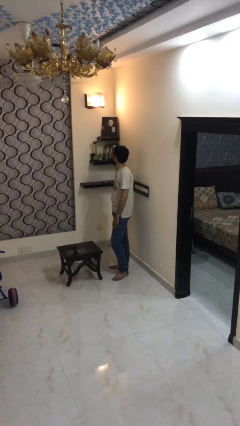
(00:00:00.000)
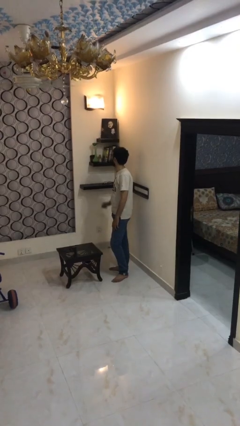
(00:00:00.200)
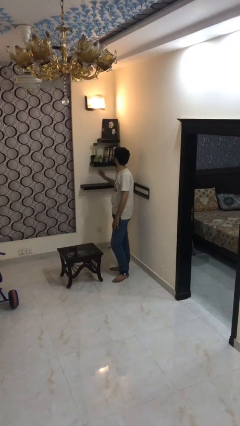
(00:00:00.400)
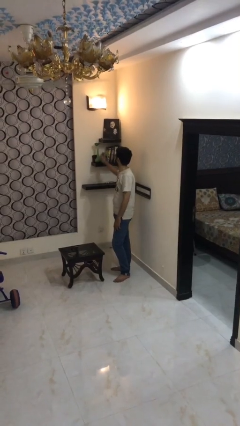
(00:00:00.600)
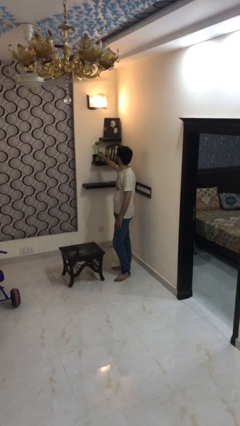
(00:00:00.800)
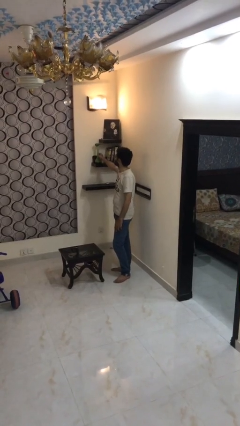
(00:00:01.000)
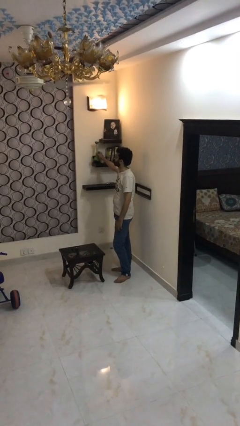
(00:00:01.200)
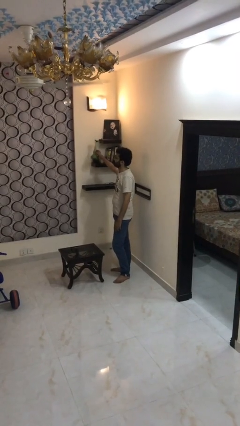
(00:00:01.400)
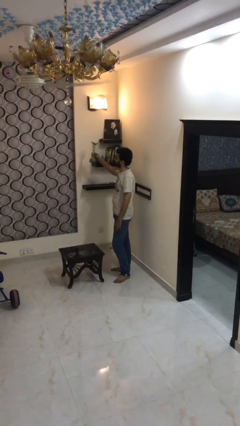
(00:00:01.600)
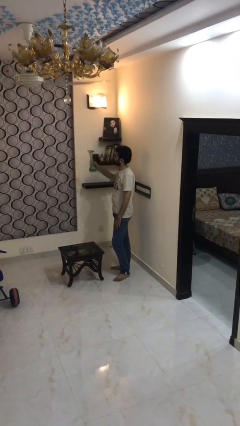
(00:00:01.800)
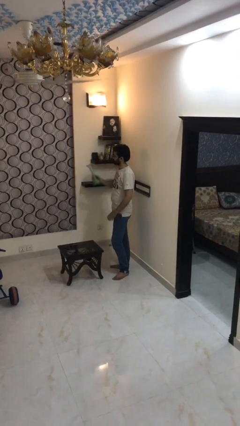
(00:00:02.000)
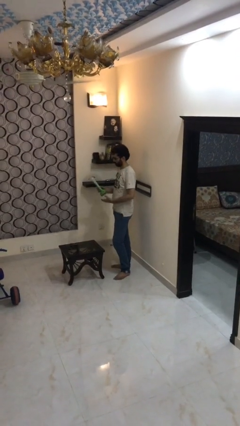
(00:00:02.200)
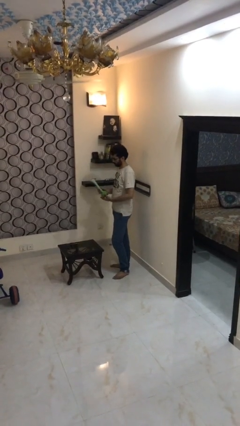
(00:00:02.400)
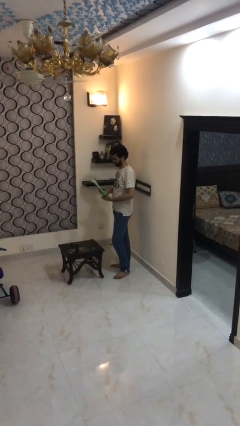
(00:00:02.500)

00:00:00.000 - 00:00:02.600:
person picks up object from shelf

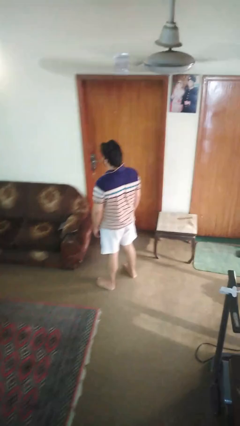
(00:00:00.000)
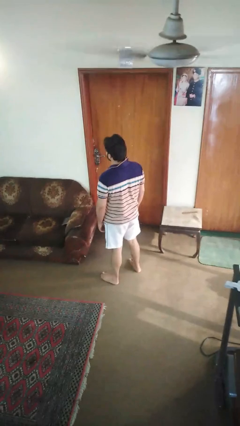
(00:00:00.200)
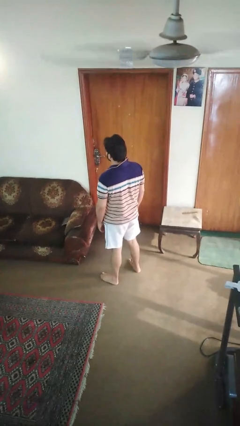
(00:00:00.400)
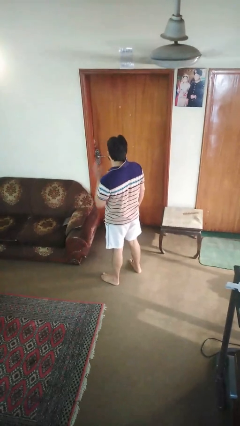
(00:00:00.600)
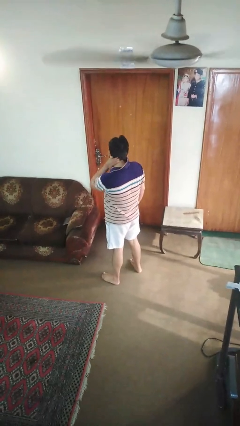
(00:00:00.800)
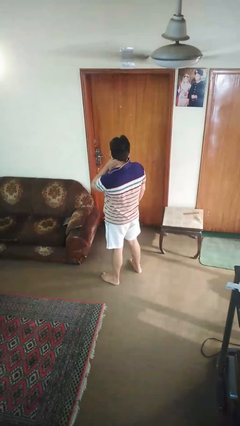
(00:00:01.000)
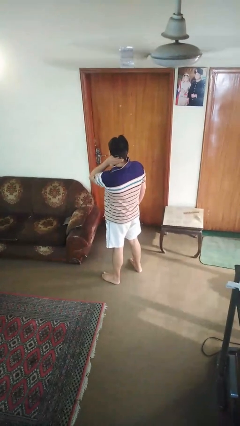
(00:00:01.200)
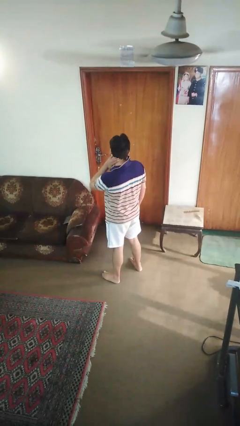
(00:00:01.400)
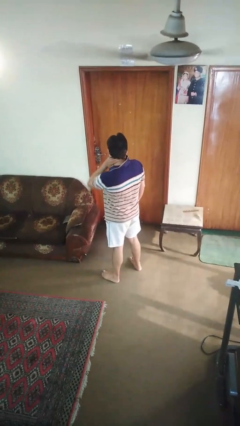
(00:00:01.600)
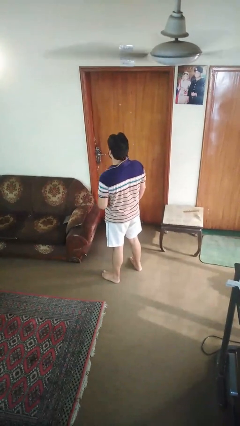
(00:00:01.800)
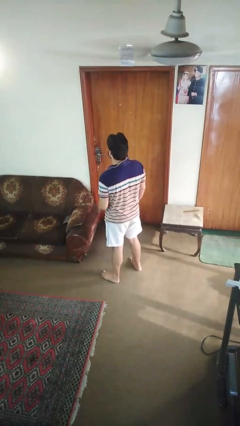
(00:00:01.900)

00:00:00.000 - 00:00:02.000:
person rubs neck

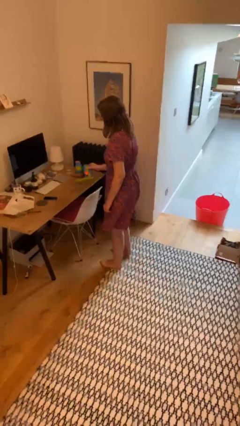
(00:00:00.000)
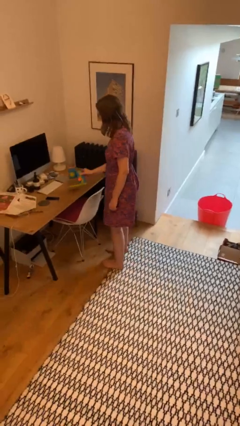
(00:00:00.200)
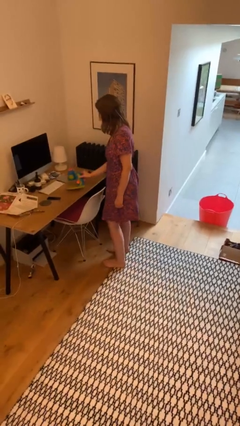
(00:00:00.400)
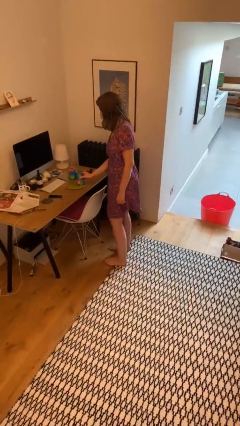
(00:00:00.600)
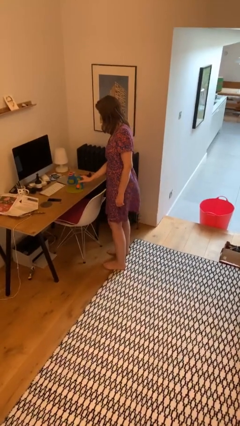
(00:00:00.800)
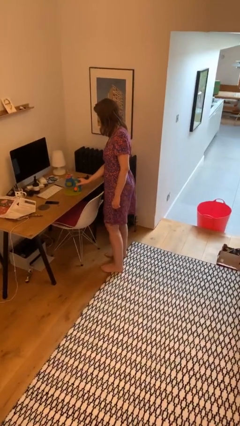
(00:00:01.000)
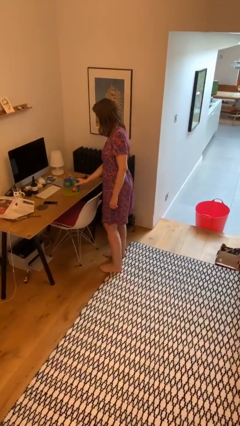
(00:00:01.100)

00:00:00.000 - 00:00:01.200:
person puts down object on table

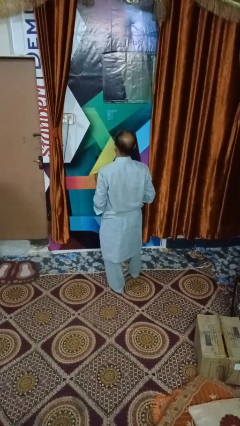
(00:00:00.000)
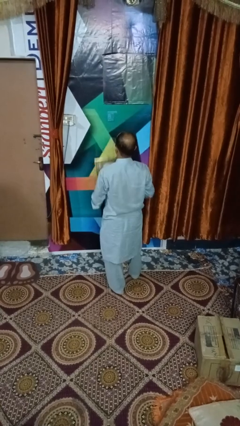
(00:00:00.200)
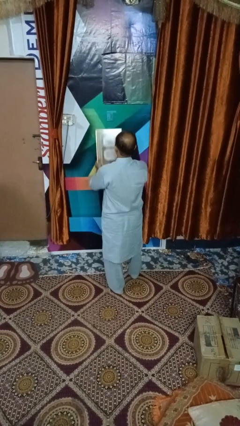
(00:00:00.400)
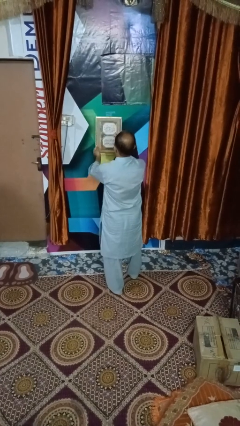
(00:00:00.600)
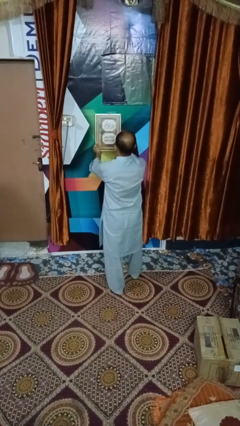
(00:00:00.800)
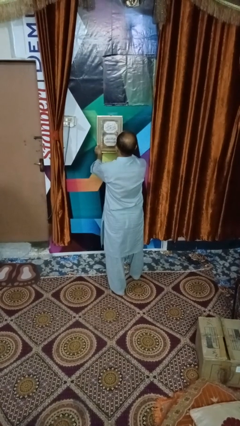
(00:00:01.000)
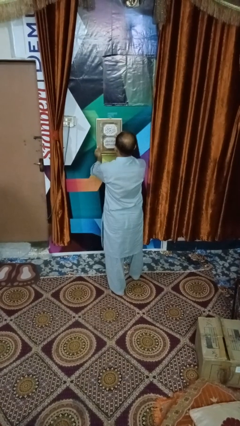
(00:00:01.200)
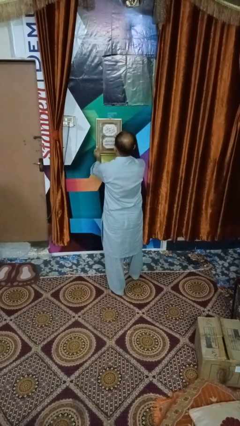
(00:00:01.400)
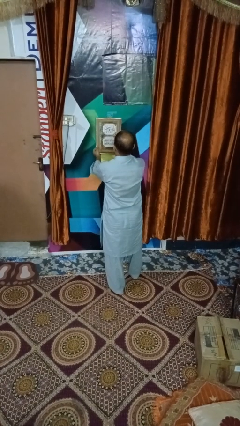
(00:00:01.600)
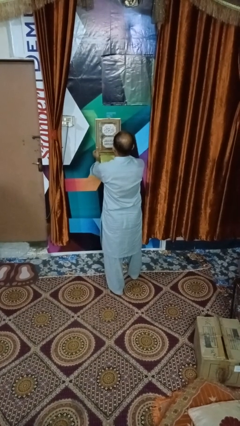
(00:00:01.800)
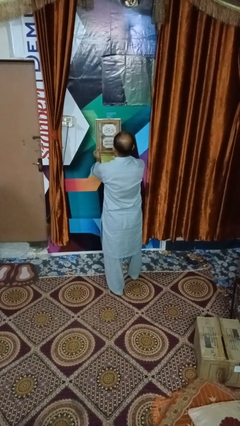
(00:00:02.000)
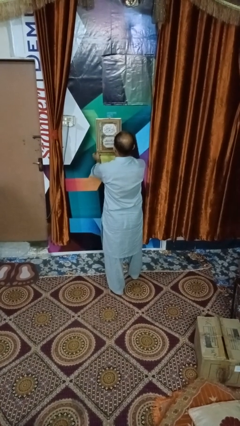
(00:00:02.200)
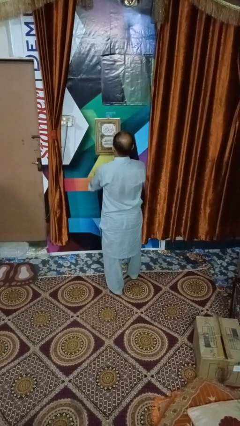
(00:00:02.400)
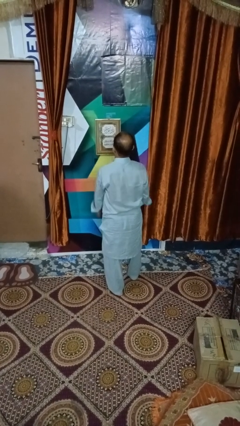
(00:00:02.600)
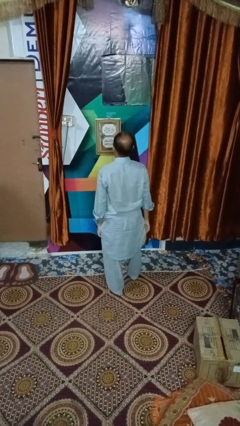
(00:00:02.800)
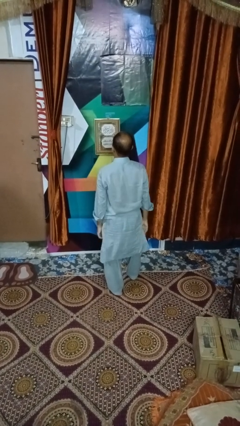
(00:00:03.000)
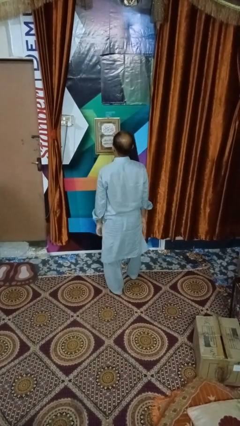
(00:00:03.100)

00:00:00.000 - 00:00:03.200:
person puts up picture frame

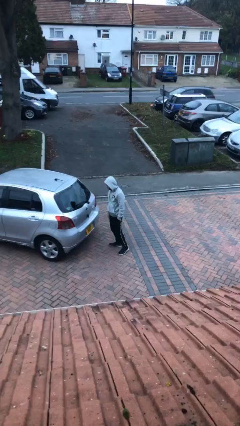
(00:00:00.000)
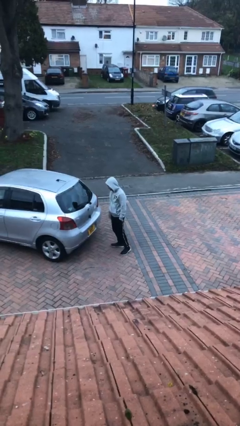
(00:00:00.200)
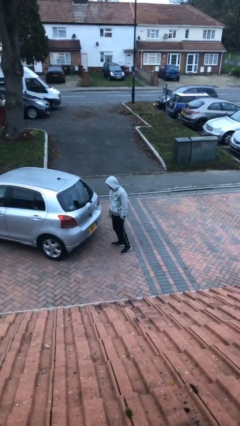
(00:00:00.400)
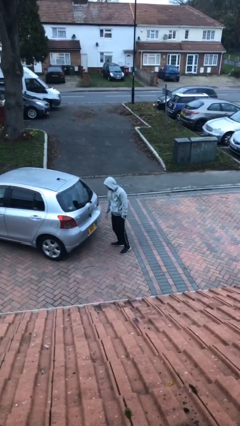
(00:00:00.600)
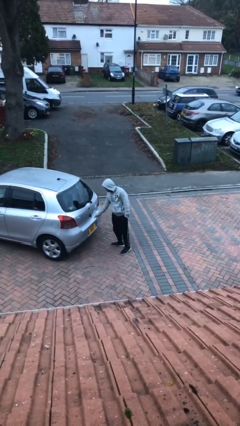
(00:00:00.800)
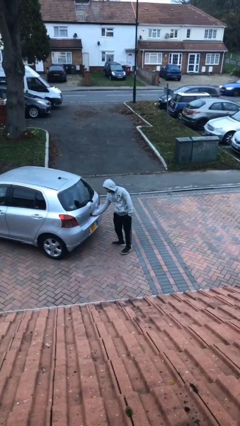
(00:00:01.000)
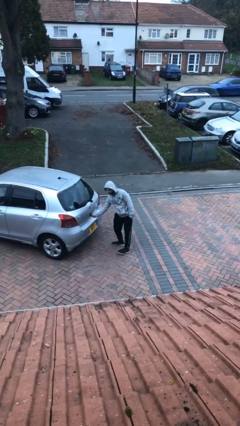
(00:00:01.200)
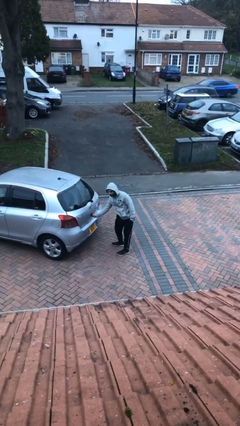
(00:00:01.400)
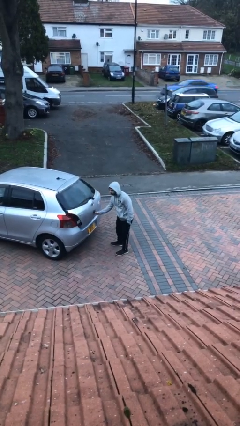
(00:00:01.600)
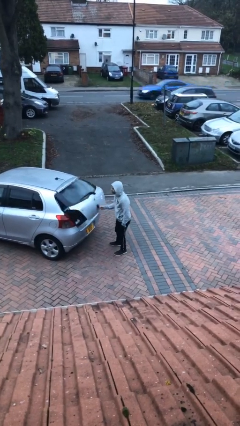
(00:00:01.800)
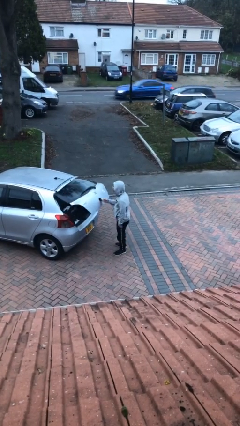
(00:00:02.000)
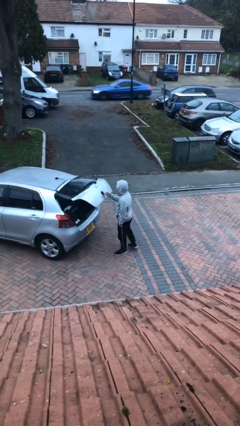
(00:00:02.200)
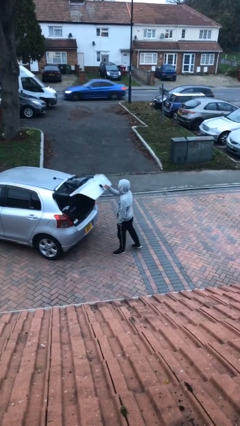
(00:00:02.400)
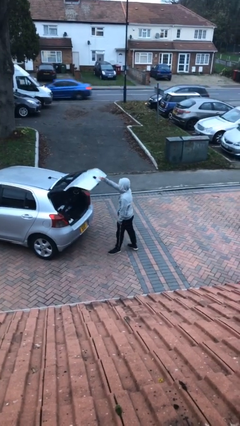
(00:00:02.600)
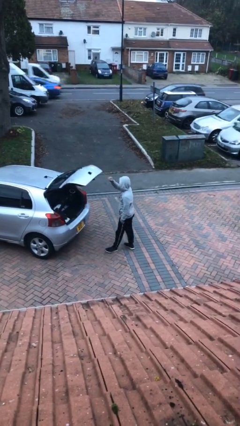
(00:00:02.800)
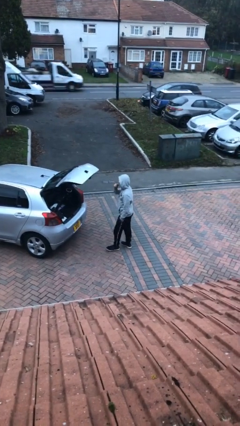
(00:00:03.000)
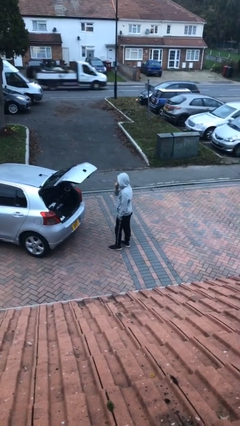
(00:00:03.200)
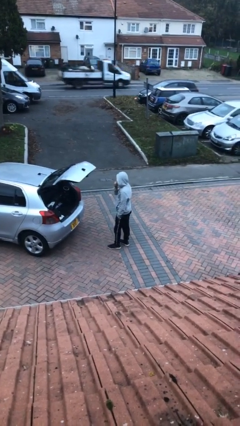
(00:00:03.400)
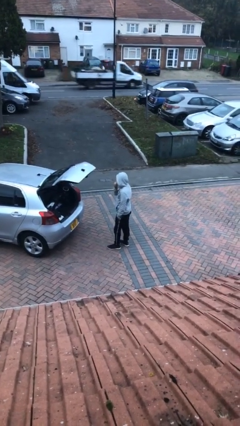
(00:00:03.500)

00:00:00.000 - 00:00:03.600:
person opens car trunk

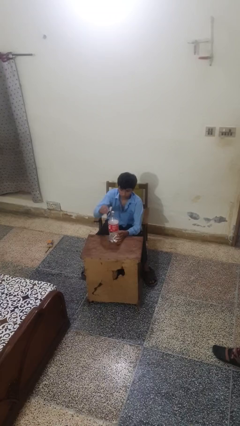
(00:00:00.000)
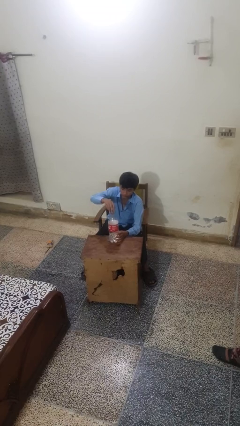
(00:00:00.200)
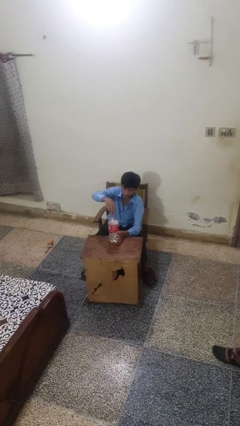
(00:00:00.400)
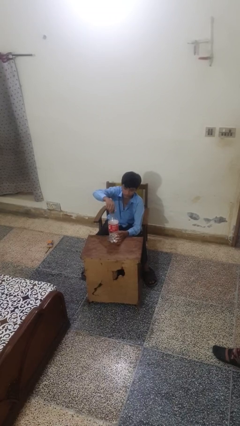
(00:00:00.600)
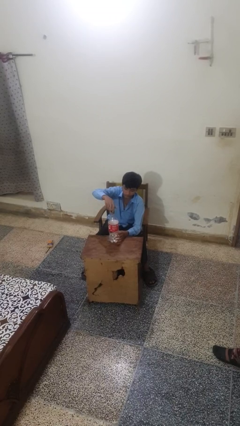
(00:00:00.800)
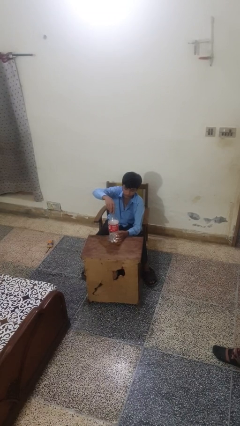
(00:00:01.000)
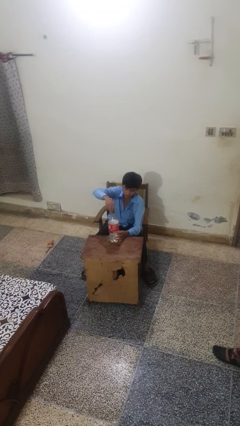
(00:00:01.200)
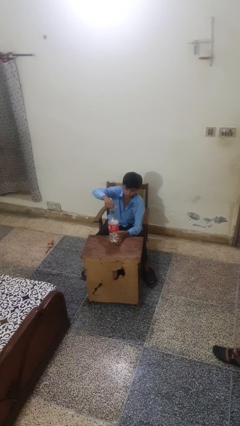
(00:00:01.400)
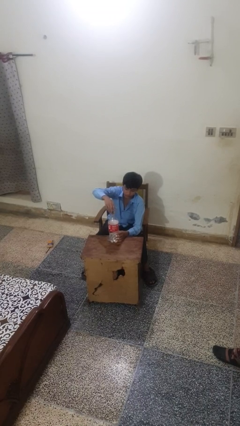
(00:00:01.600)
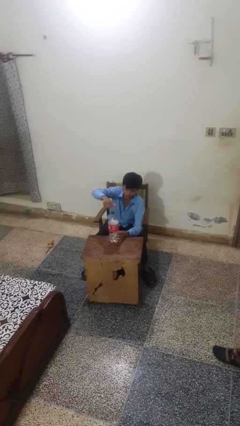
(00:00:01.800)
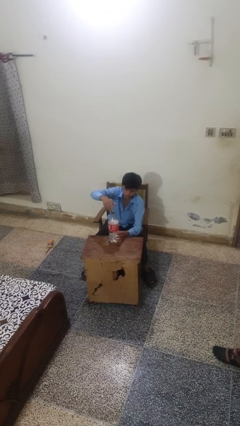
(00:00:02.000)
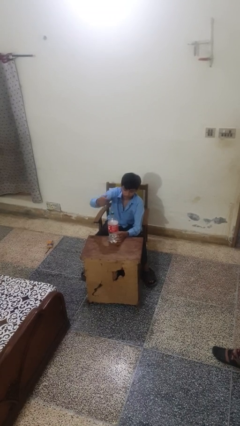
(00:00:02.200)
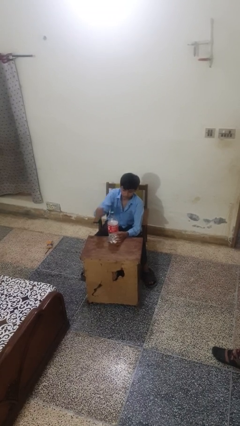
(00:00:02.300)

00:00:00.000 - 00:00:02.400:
person screws lid to bottle

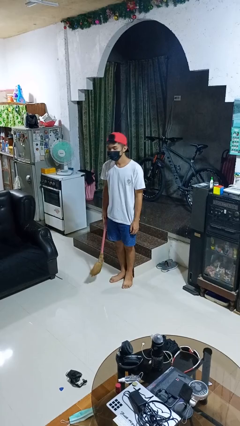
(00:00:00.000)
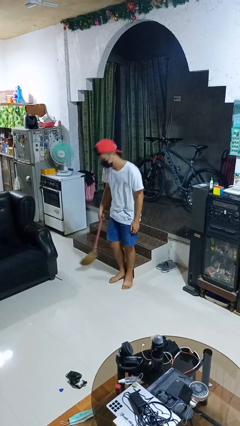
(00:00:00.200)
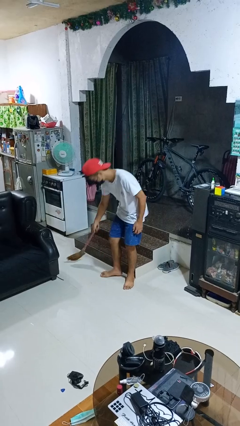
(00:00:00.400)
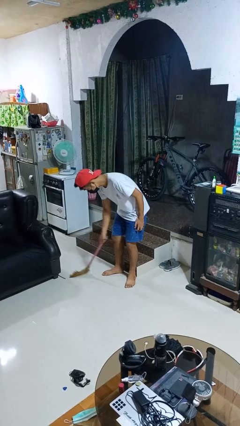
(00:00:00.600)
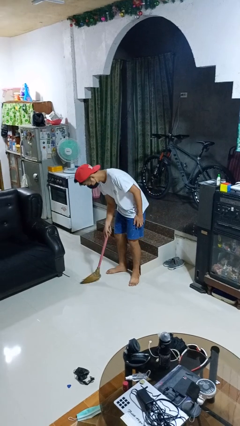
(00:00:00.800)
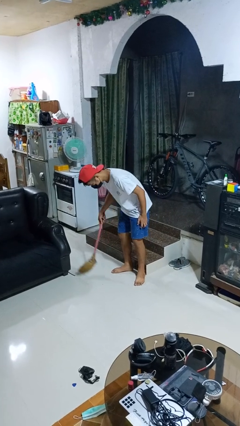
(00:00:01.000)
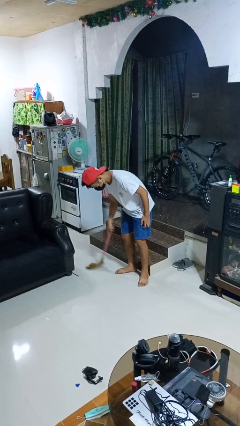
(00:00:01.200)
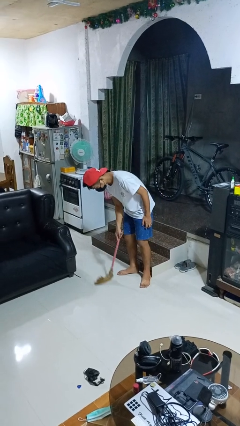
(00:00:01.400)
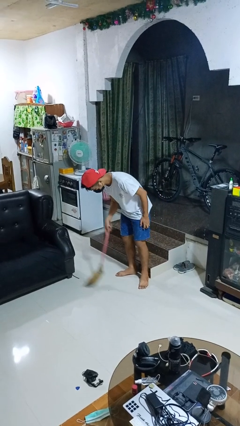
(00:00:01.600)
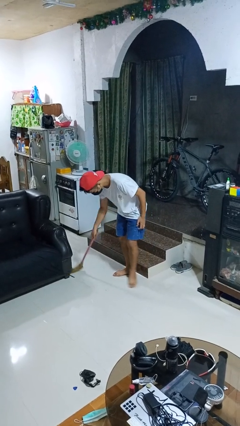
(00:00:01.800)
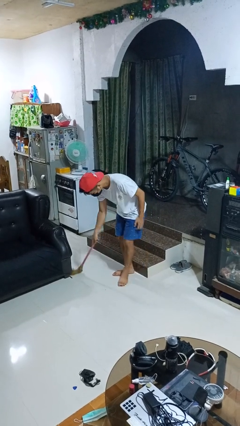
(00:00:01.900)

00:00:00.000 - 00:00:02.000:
person sweeps floor

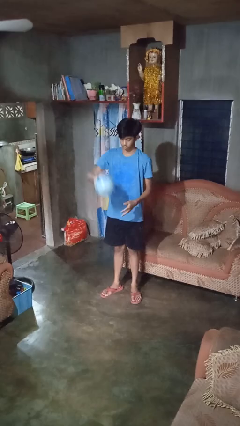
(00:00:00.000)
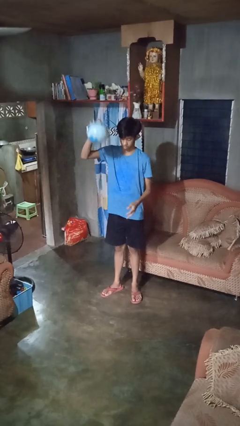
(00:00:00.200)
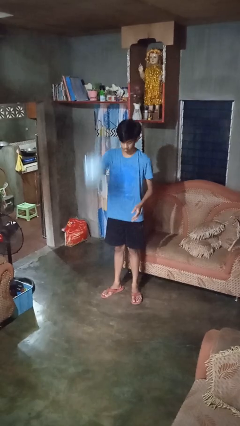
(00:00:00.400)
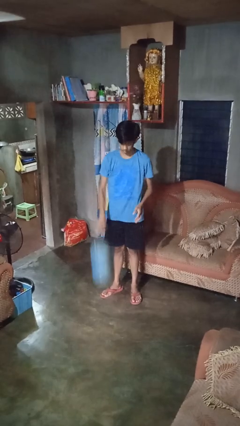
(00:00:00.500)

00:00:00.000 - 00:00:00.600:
person bounces ball on floor
